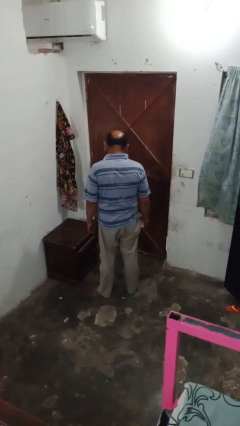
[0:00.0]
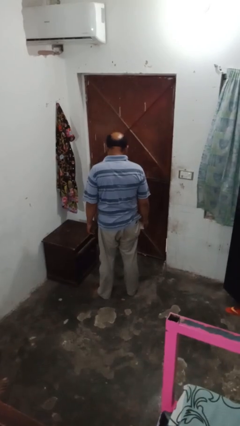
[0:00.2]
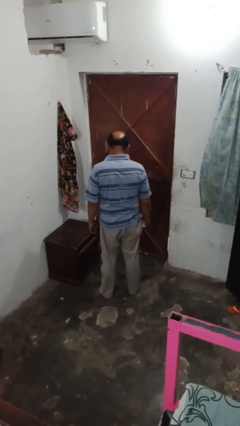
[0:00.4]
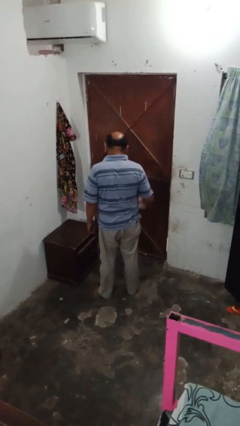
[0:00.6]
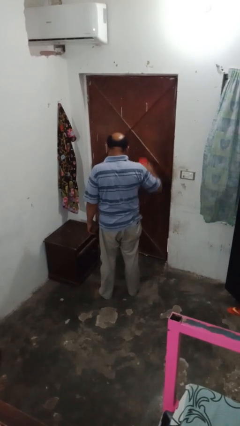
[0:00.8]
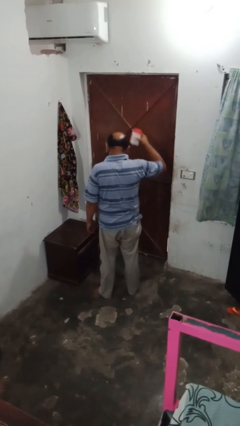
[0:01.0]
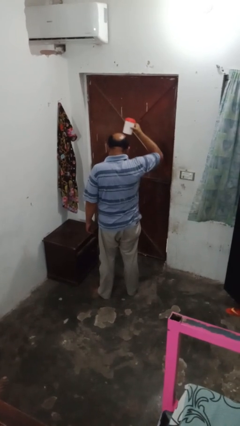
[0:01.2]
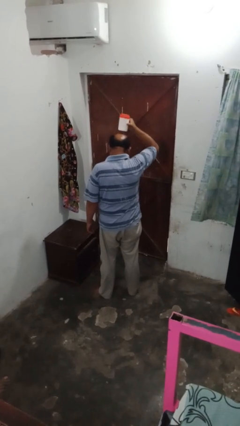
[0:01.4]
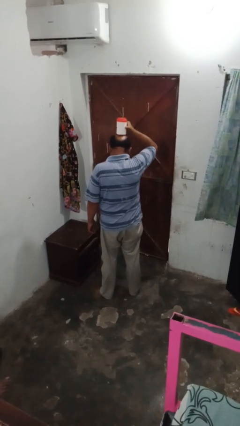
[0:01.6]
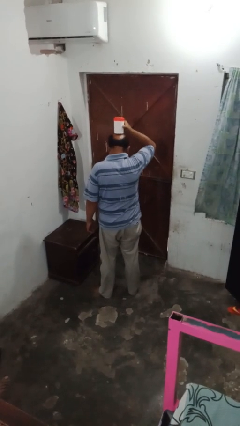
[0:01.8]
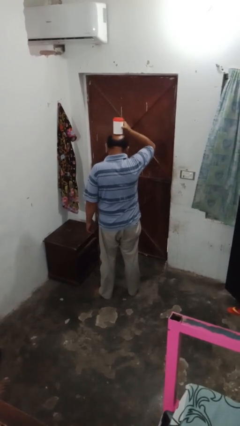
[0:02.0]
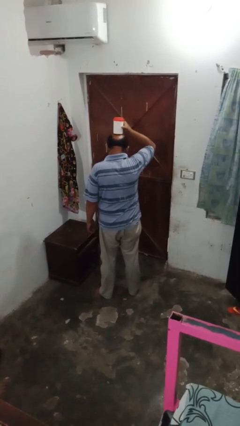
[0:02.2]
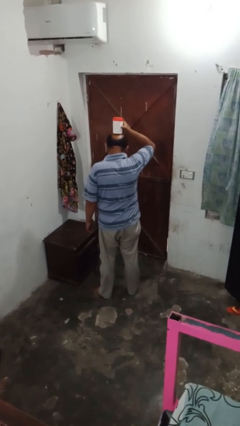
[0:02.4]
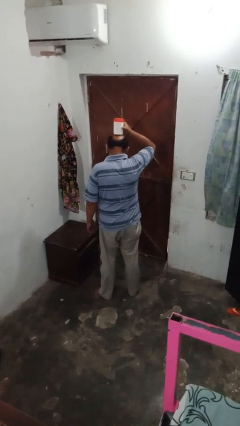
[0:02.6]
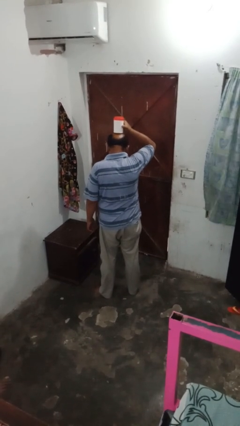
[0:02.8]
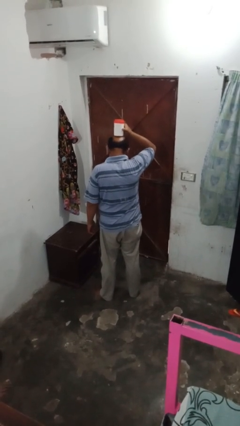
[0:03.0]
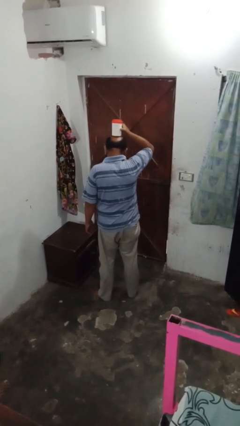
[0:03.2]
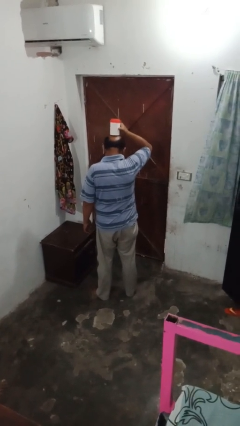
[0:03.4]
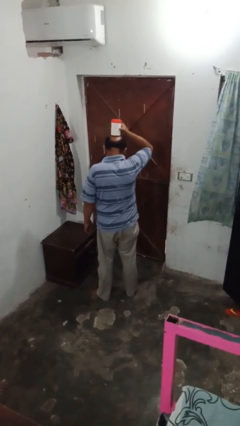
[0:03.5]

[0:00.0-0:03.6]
person holds object above head

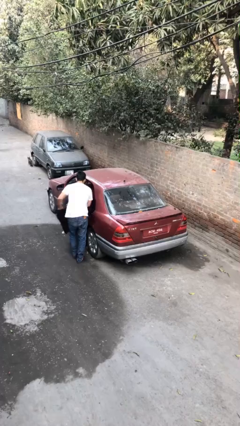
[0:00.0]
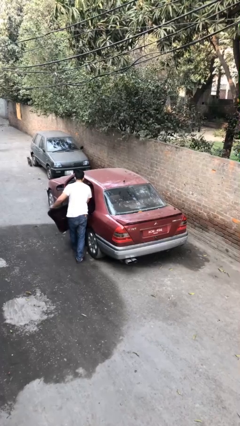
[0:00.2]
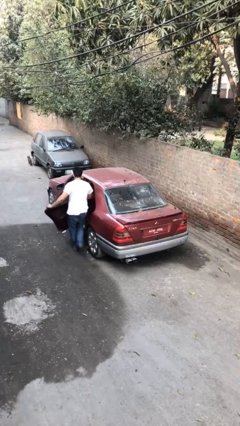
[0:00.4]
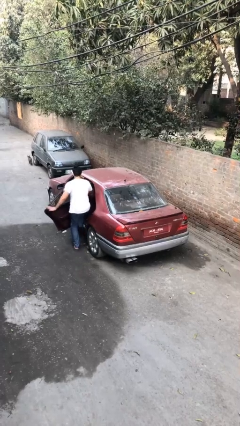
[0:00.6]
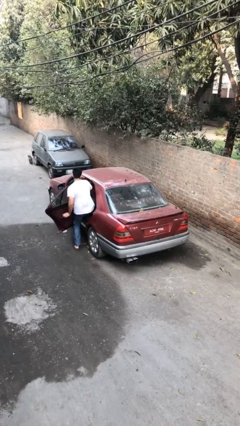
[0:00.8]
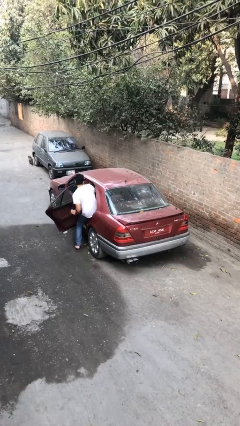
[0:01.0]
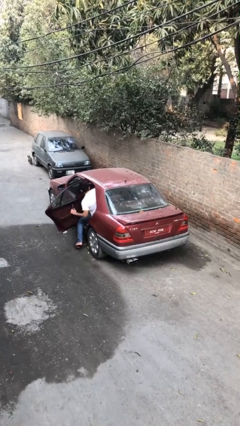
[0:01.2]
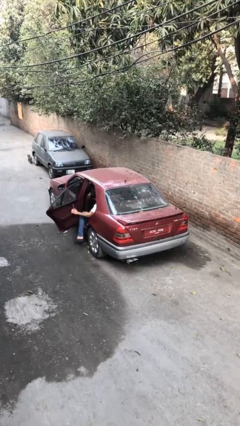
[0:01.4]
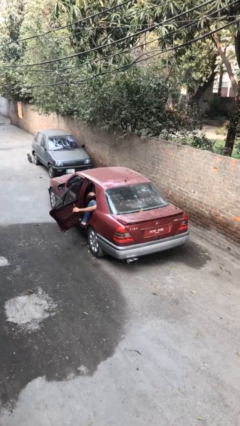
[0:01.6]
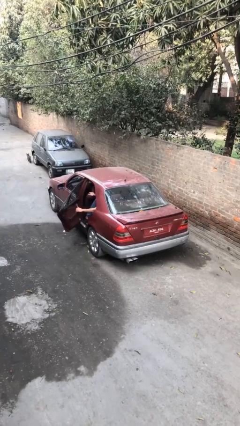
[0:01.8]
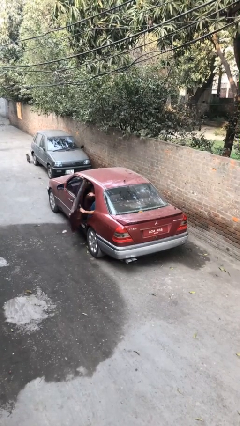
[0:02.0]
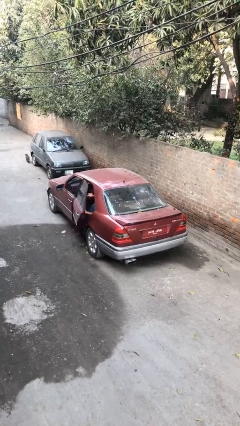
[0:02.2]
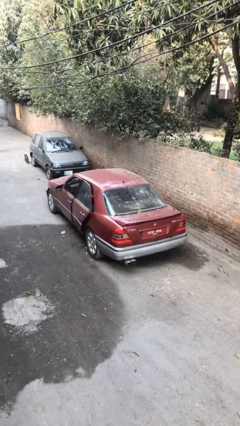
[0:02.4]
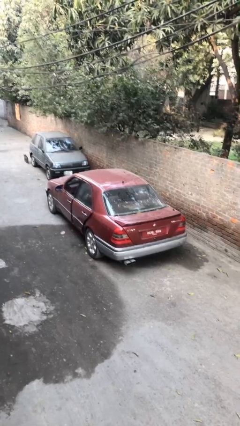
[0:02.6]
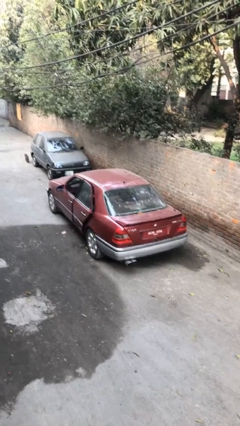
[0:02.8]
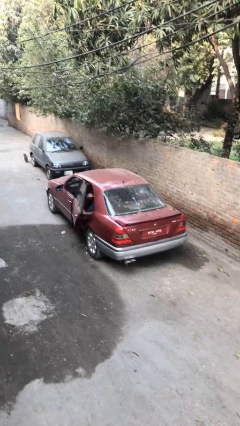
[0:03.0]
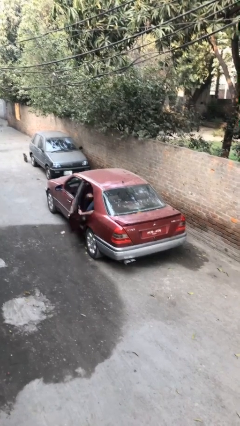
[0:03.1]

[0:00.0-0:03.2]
car picks up person

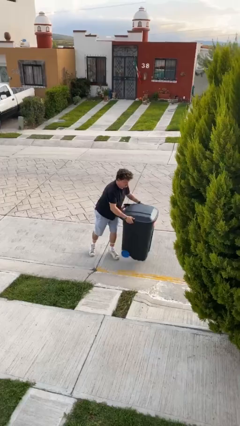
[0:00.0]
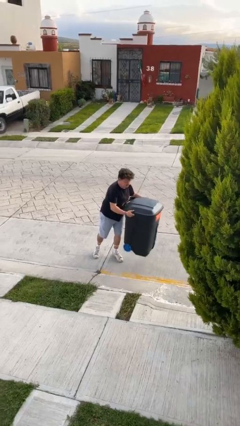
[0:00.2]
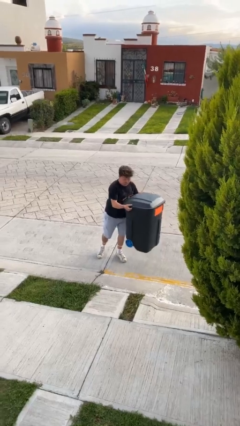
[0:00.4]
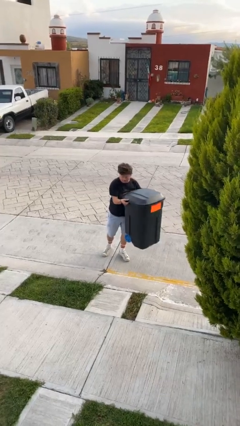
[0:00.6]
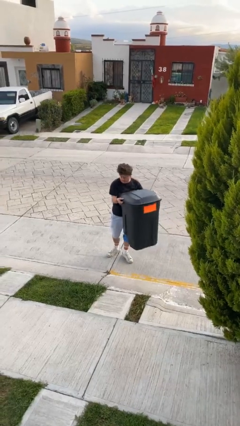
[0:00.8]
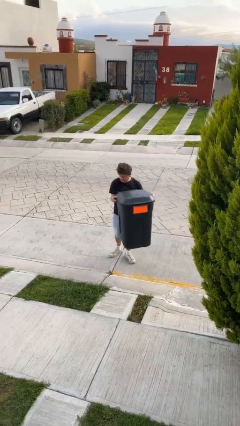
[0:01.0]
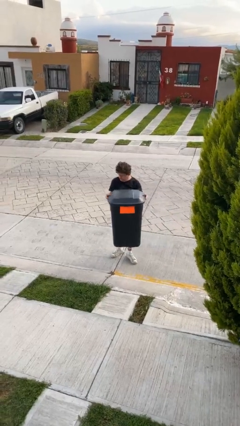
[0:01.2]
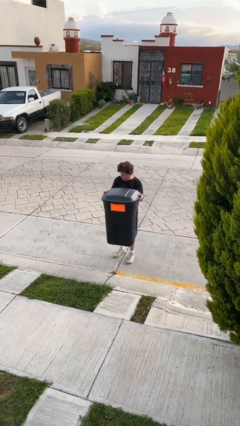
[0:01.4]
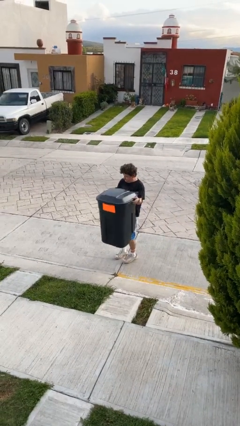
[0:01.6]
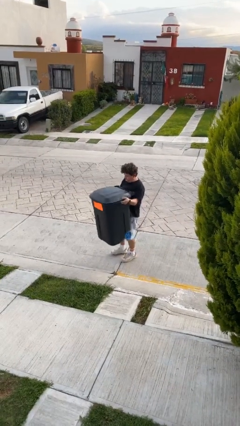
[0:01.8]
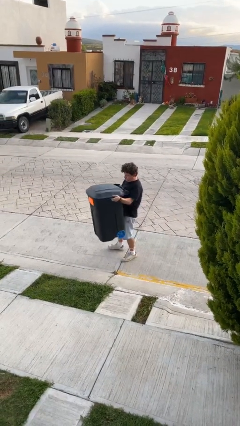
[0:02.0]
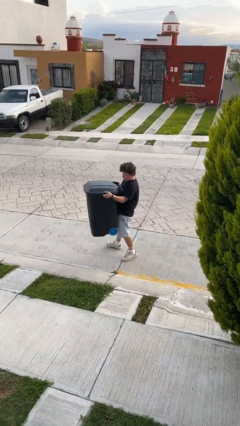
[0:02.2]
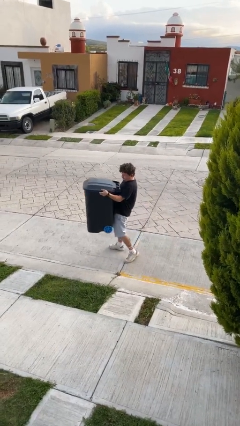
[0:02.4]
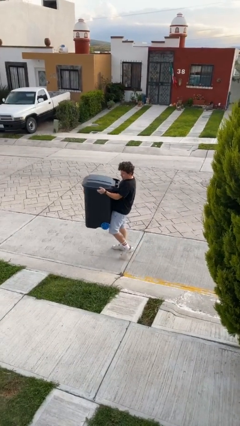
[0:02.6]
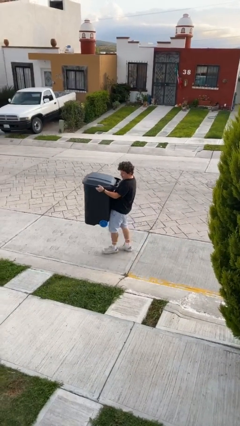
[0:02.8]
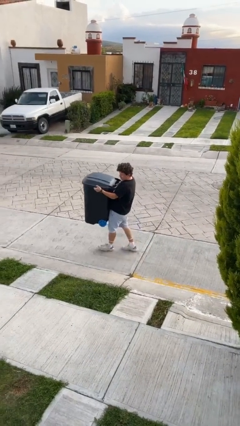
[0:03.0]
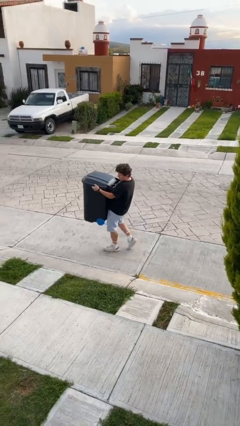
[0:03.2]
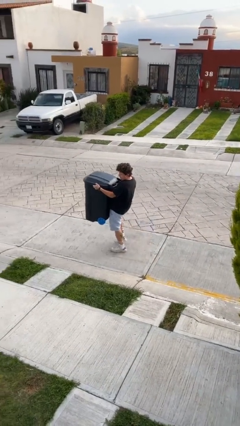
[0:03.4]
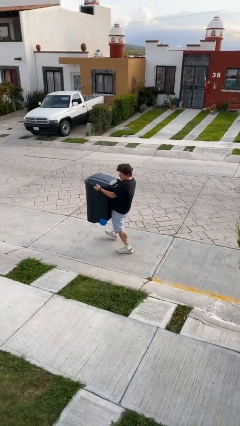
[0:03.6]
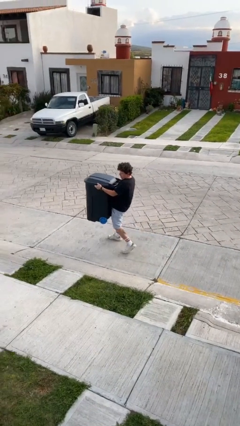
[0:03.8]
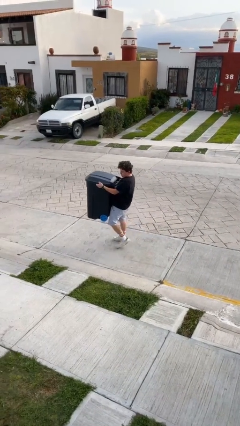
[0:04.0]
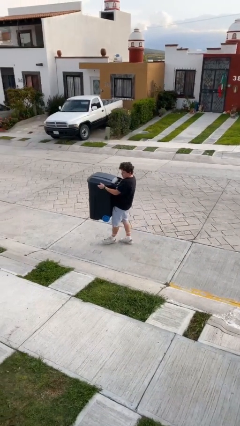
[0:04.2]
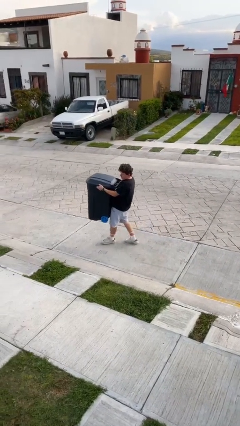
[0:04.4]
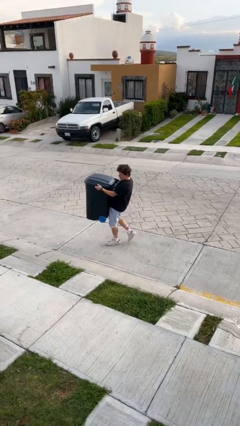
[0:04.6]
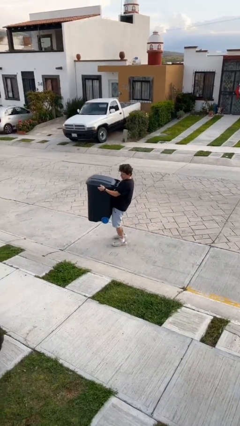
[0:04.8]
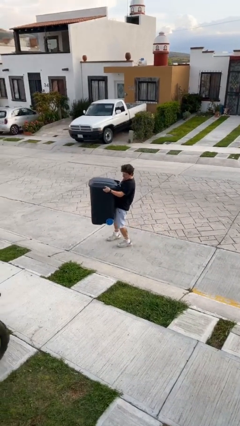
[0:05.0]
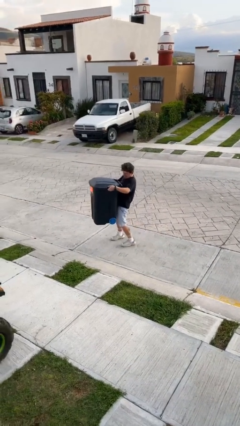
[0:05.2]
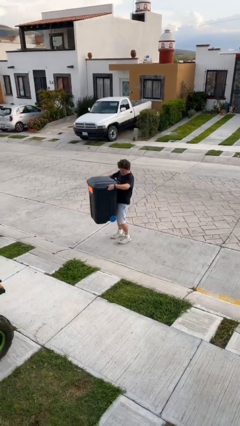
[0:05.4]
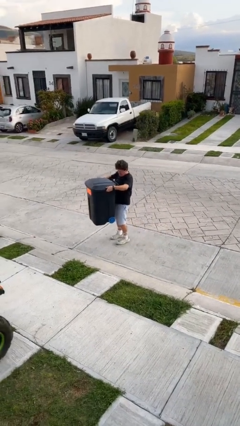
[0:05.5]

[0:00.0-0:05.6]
person carries heavy object

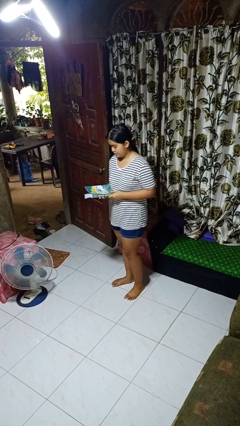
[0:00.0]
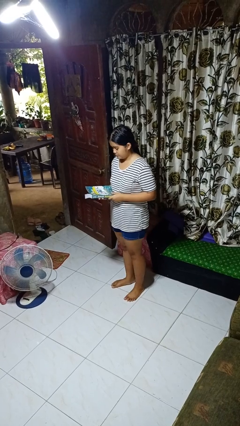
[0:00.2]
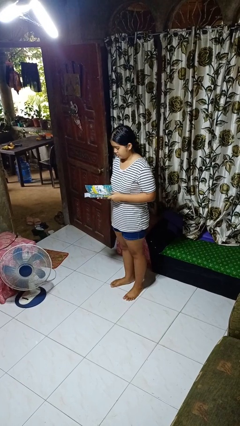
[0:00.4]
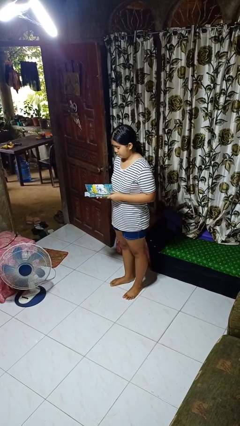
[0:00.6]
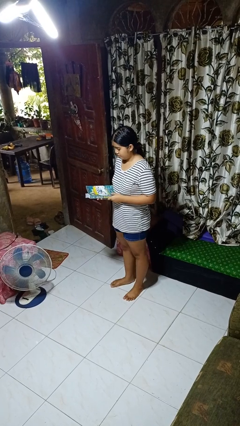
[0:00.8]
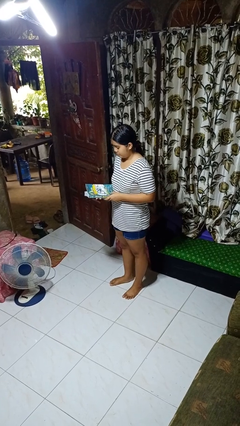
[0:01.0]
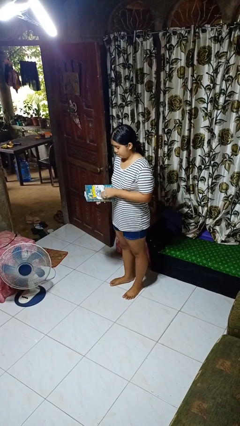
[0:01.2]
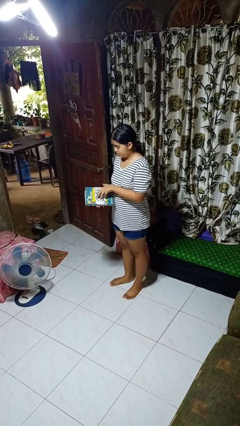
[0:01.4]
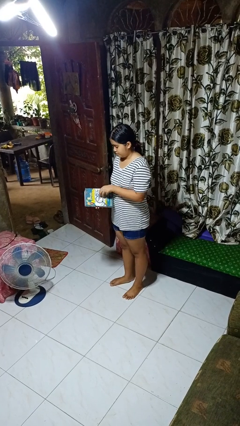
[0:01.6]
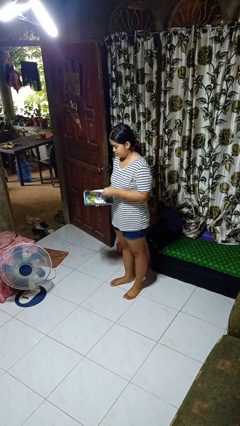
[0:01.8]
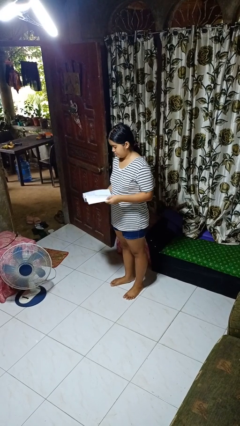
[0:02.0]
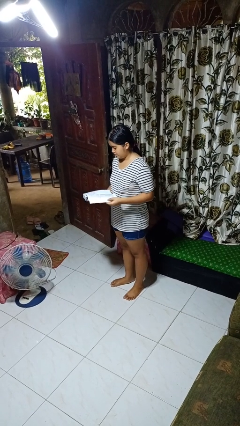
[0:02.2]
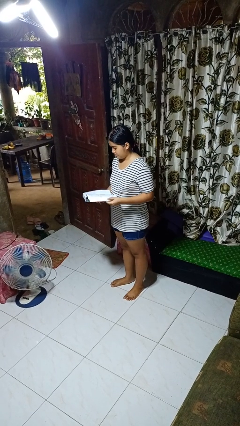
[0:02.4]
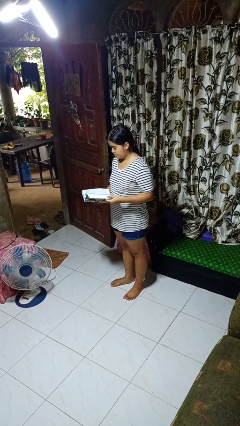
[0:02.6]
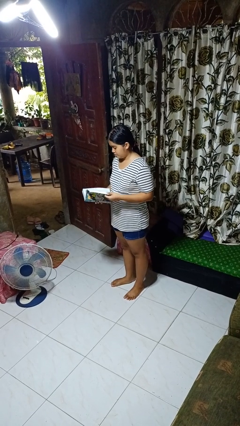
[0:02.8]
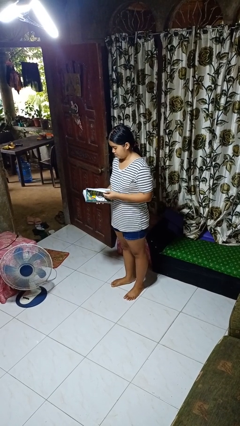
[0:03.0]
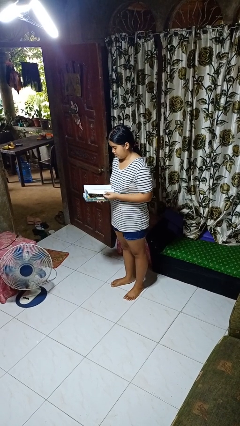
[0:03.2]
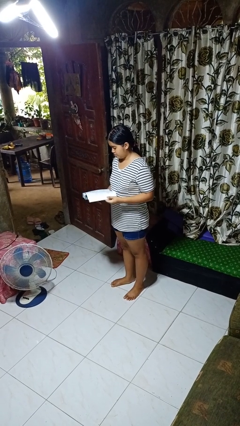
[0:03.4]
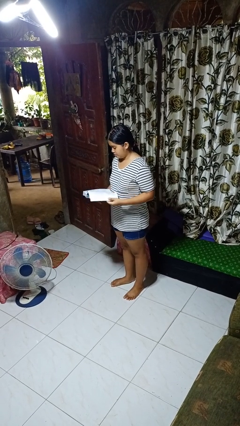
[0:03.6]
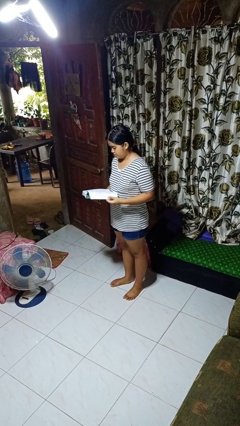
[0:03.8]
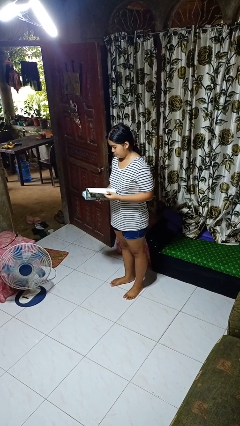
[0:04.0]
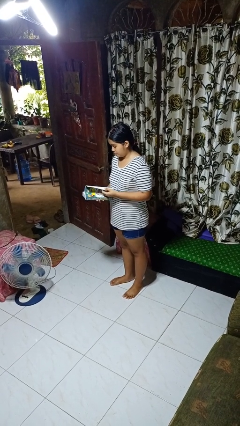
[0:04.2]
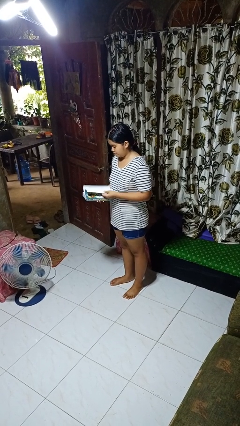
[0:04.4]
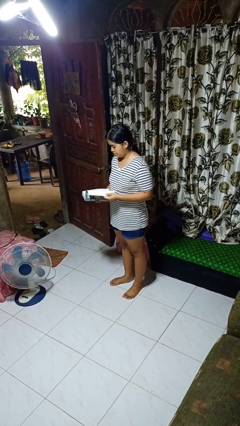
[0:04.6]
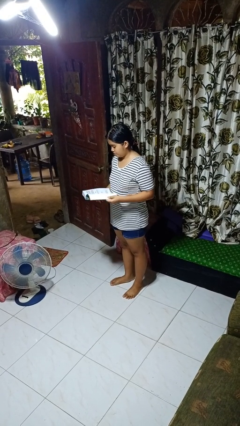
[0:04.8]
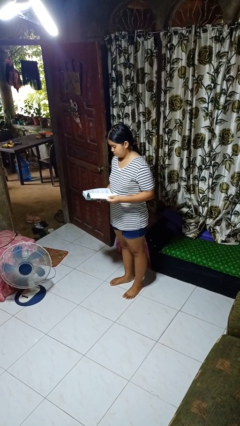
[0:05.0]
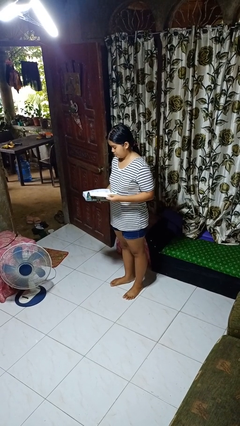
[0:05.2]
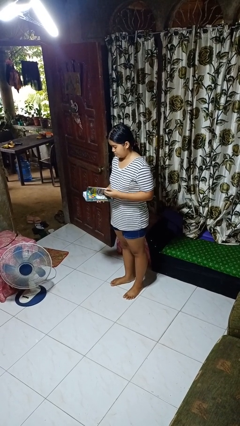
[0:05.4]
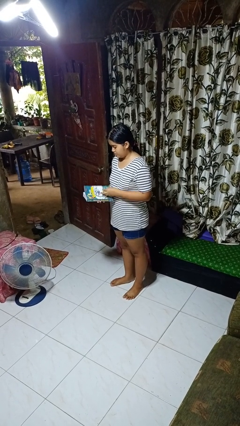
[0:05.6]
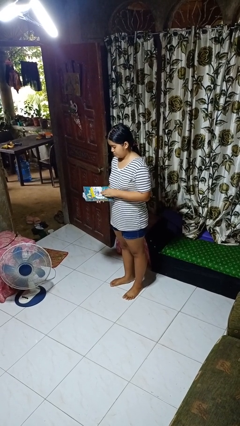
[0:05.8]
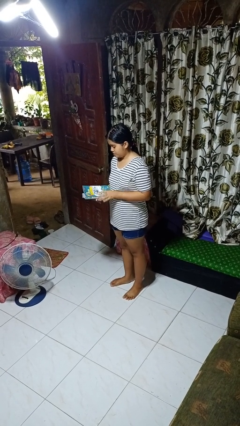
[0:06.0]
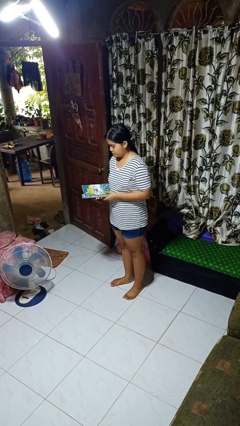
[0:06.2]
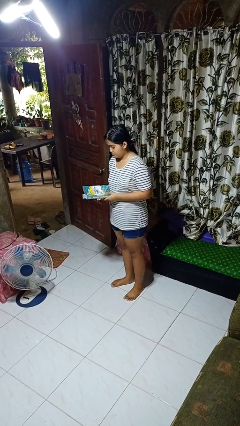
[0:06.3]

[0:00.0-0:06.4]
person reads book
